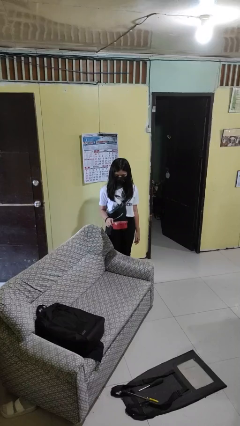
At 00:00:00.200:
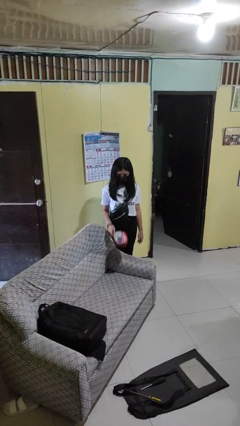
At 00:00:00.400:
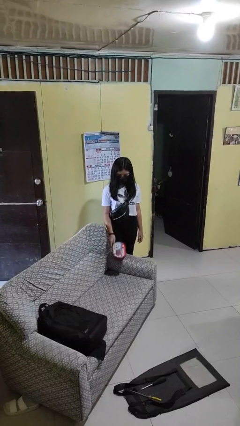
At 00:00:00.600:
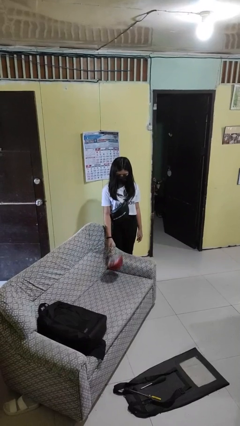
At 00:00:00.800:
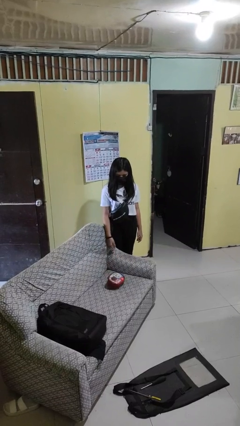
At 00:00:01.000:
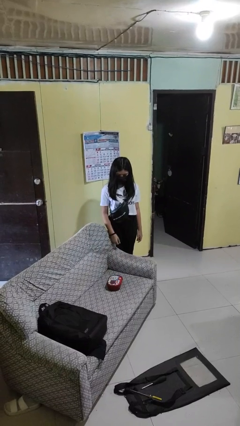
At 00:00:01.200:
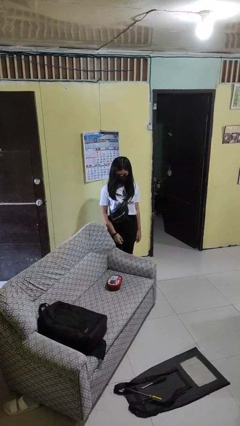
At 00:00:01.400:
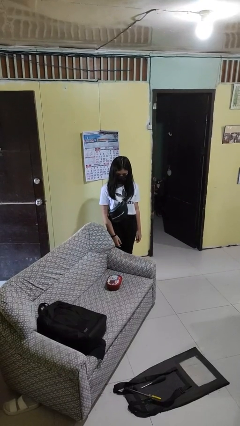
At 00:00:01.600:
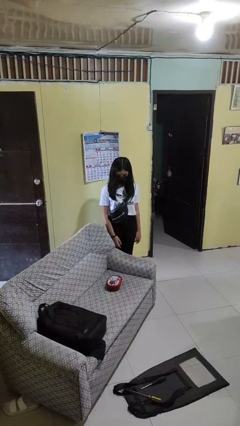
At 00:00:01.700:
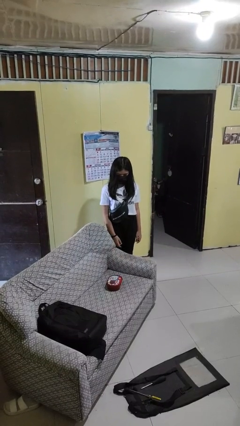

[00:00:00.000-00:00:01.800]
person puts down object on couch

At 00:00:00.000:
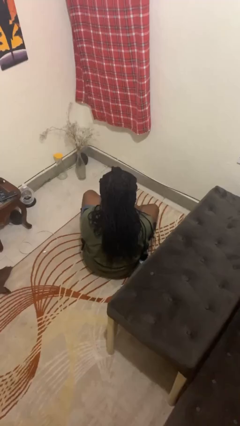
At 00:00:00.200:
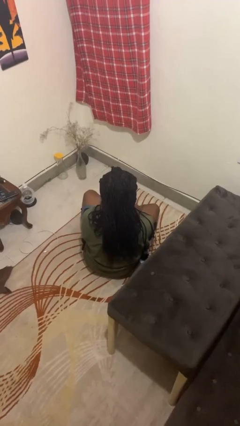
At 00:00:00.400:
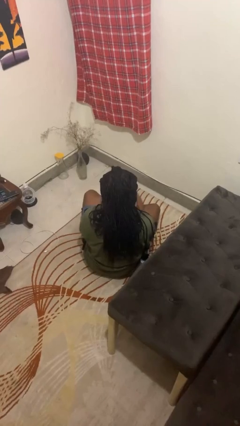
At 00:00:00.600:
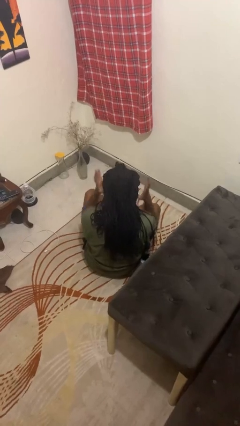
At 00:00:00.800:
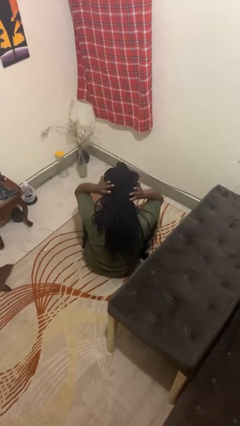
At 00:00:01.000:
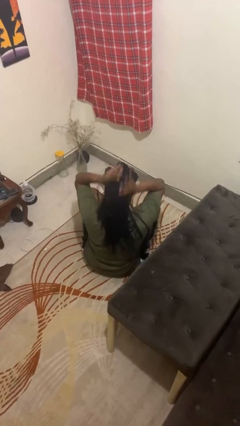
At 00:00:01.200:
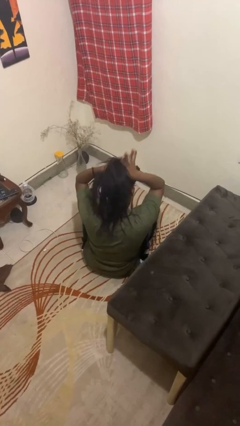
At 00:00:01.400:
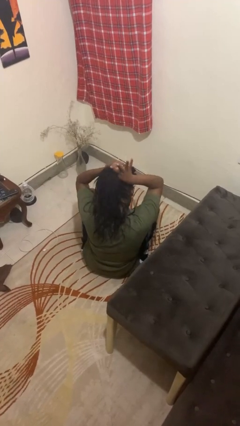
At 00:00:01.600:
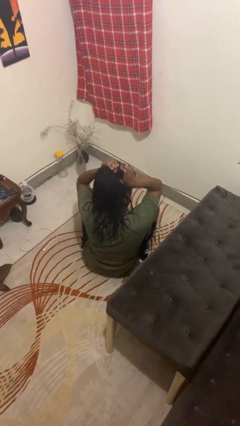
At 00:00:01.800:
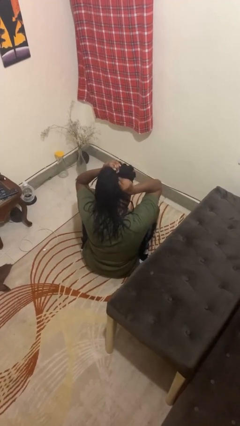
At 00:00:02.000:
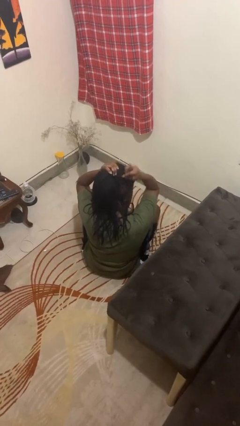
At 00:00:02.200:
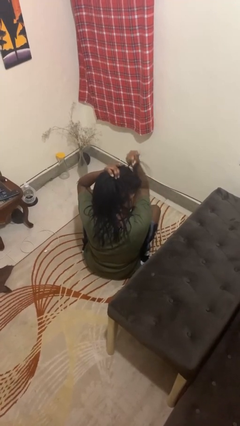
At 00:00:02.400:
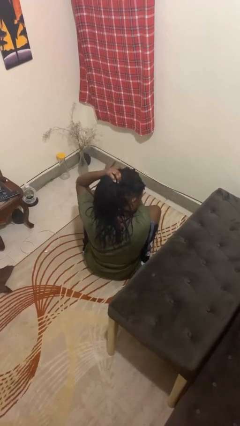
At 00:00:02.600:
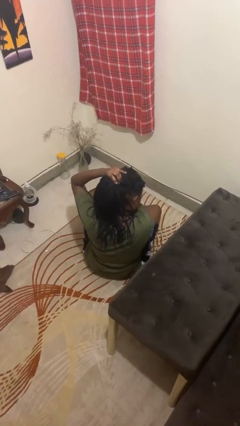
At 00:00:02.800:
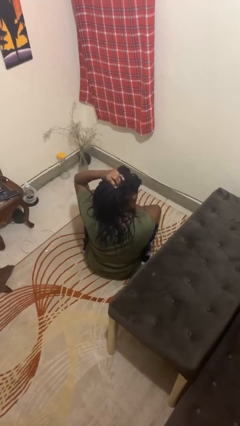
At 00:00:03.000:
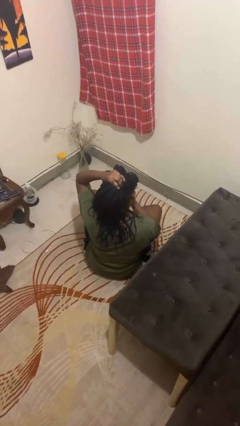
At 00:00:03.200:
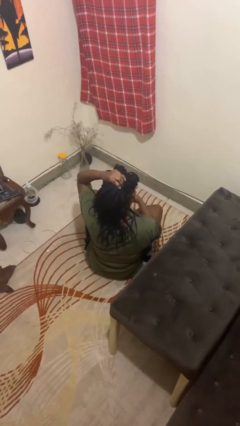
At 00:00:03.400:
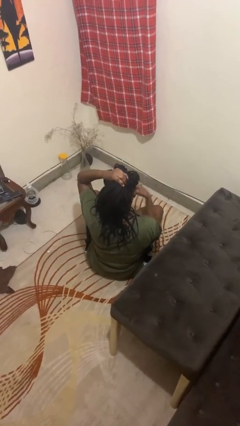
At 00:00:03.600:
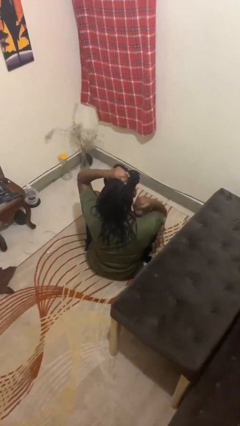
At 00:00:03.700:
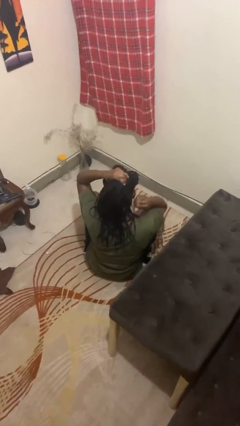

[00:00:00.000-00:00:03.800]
person puts hair in ponytail

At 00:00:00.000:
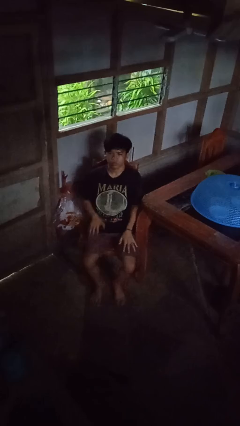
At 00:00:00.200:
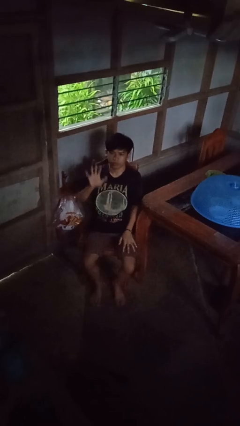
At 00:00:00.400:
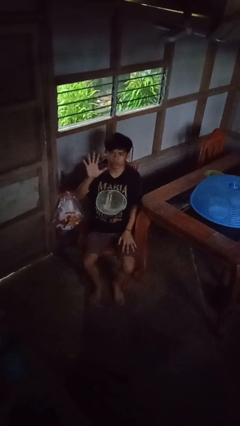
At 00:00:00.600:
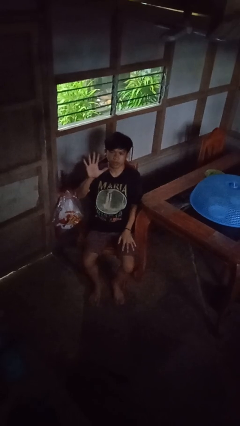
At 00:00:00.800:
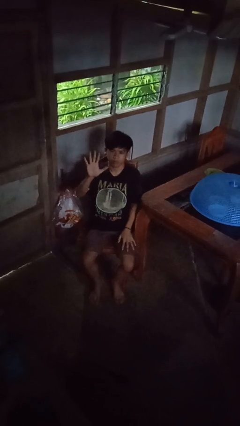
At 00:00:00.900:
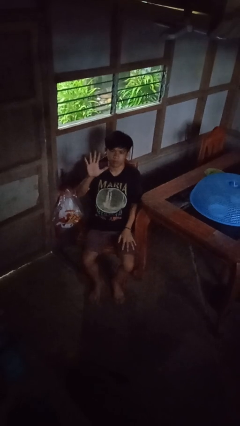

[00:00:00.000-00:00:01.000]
person gestures number five

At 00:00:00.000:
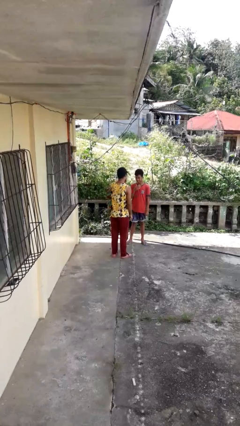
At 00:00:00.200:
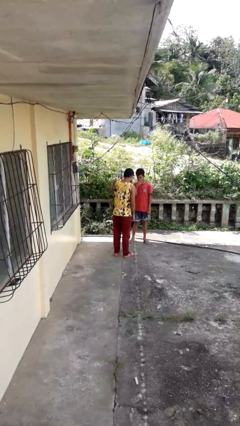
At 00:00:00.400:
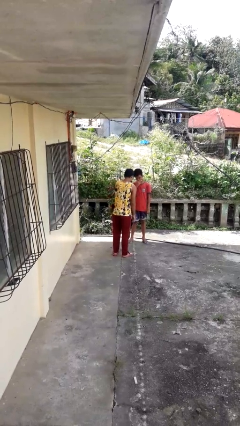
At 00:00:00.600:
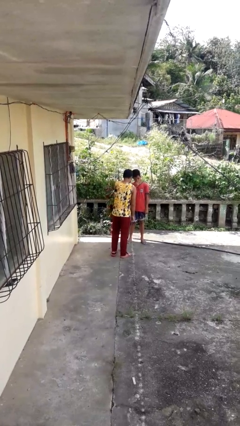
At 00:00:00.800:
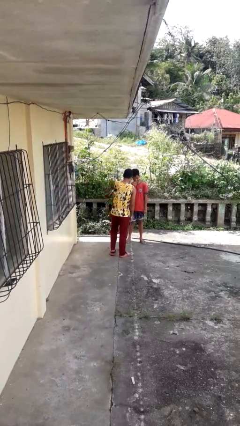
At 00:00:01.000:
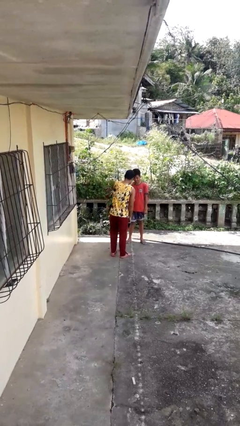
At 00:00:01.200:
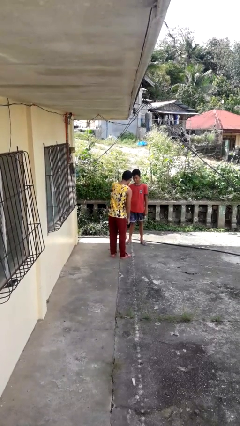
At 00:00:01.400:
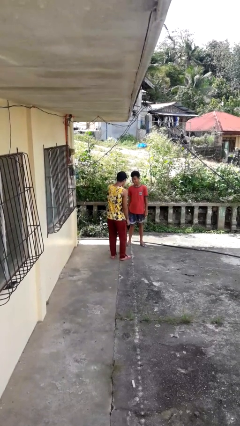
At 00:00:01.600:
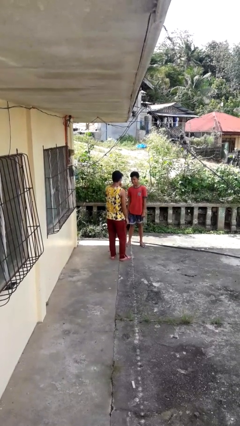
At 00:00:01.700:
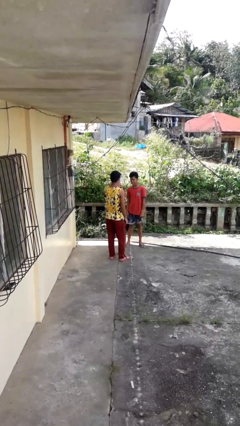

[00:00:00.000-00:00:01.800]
person laughs with person

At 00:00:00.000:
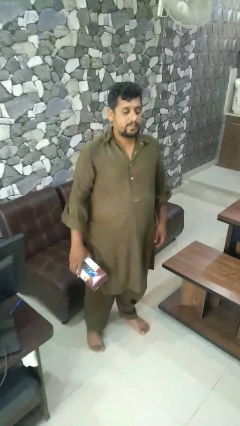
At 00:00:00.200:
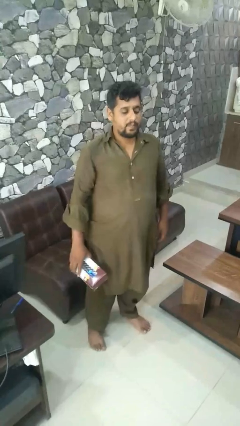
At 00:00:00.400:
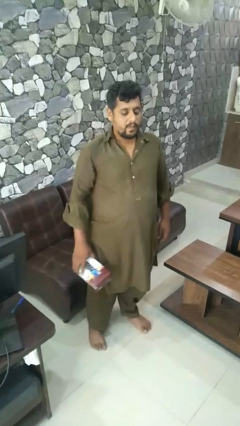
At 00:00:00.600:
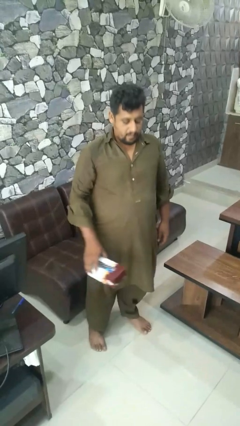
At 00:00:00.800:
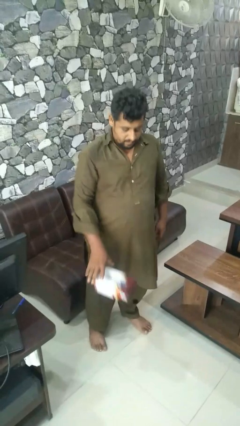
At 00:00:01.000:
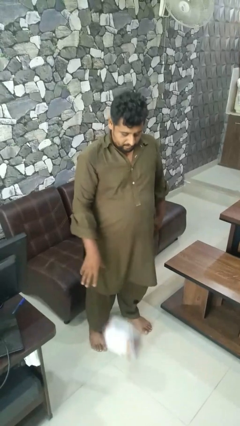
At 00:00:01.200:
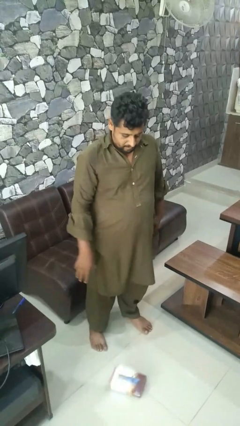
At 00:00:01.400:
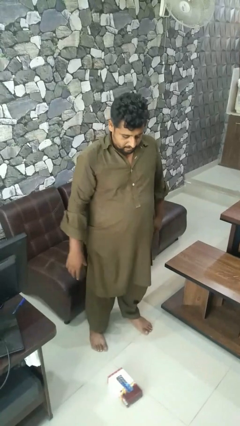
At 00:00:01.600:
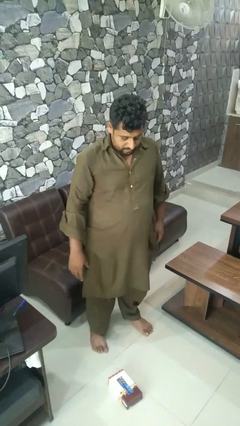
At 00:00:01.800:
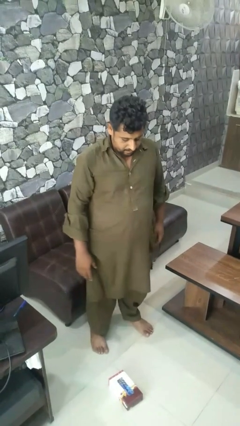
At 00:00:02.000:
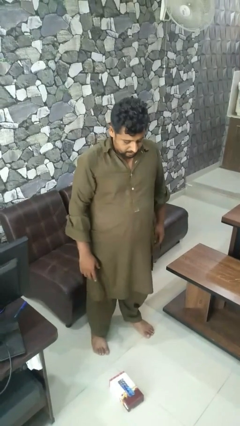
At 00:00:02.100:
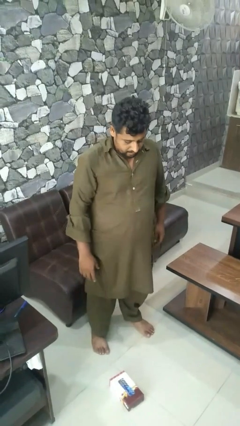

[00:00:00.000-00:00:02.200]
person throws object to ground

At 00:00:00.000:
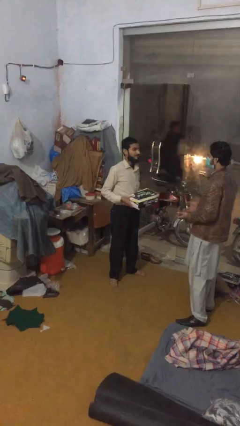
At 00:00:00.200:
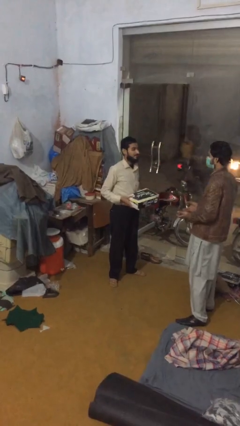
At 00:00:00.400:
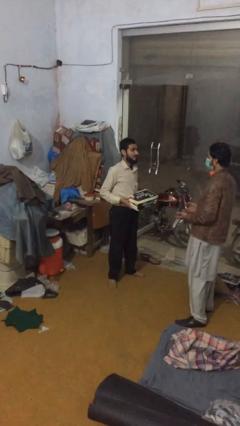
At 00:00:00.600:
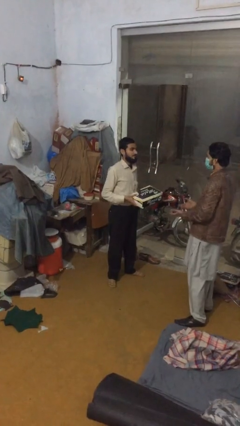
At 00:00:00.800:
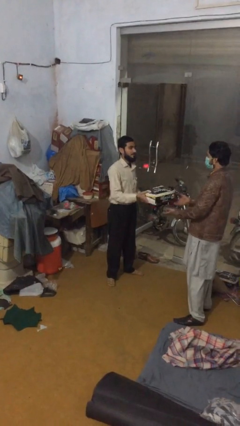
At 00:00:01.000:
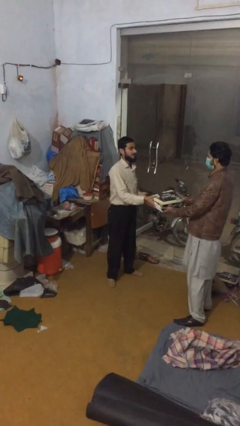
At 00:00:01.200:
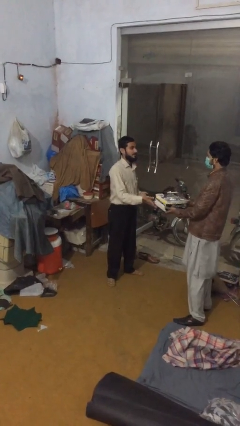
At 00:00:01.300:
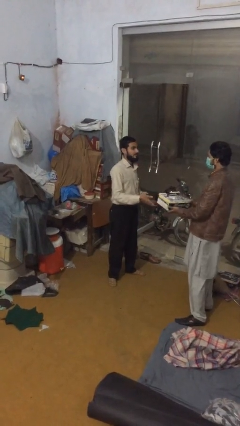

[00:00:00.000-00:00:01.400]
person transfers object to person

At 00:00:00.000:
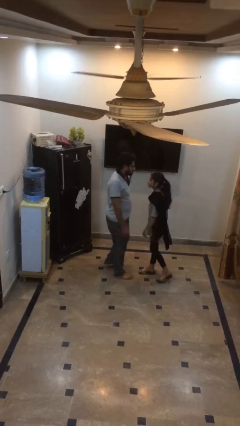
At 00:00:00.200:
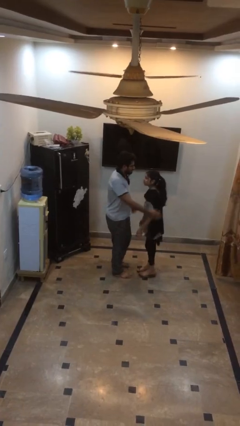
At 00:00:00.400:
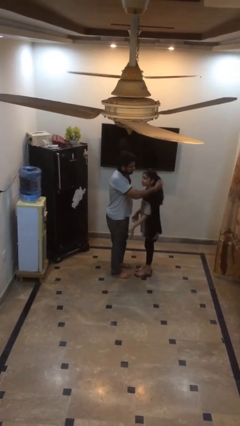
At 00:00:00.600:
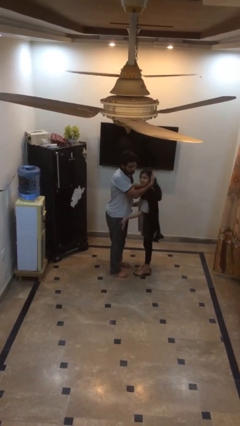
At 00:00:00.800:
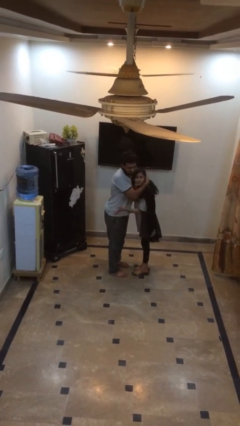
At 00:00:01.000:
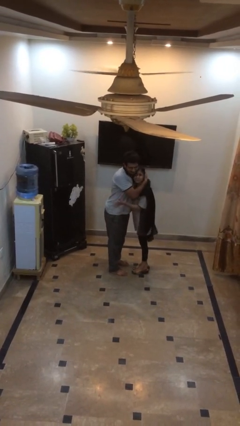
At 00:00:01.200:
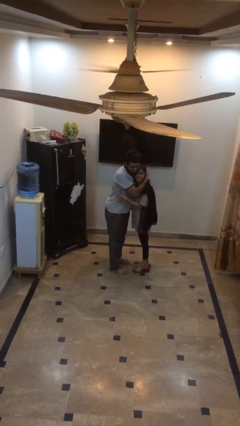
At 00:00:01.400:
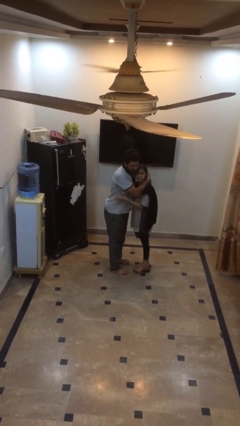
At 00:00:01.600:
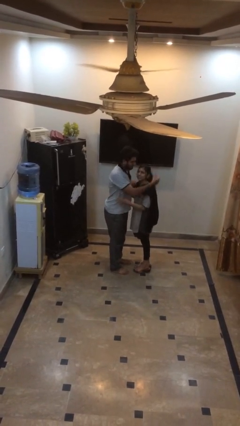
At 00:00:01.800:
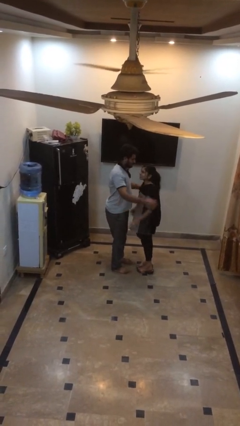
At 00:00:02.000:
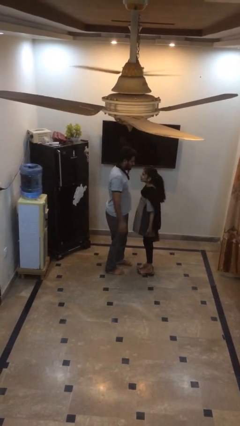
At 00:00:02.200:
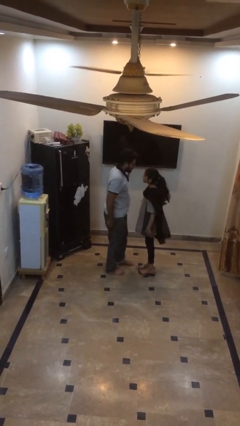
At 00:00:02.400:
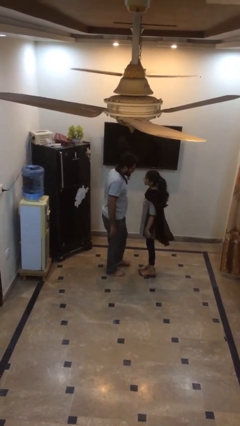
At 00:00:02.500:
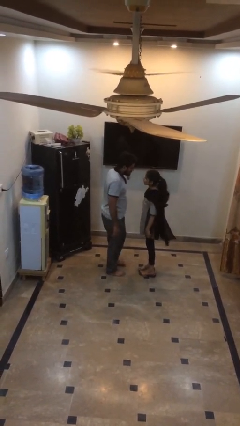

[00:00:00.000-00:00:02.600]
person embraces person

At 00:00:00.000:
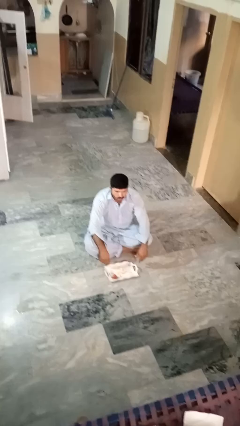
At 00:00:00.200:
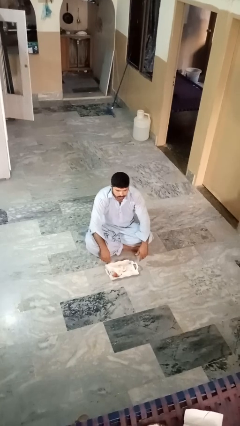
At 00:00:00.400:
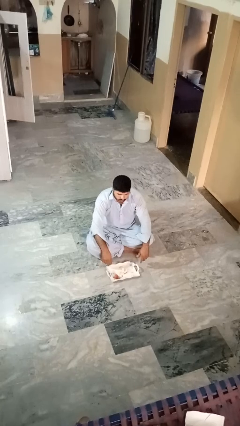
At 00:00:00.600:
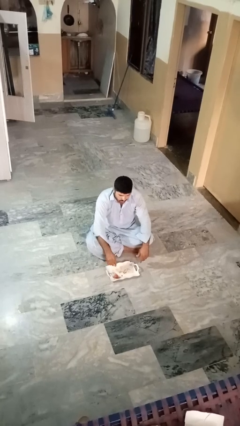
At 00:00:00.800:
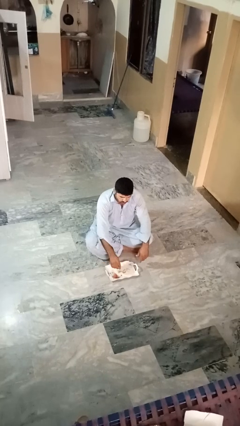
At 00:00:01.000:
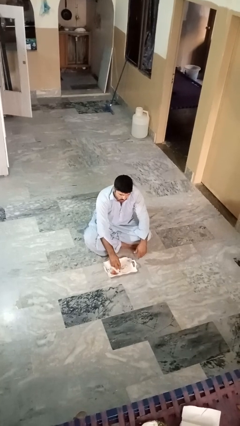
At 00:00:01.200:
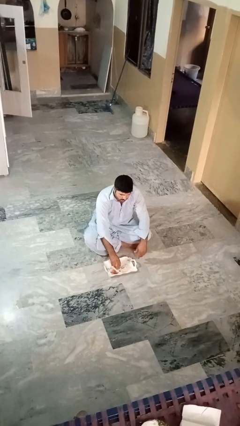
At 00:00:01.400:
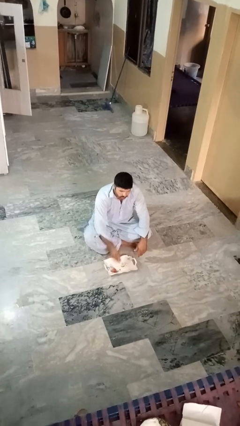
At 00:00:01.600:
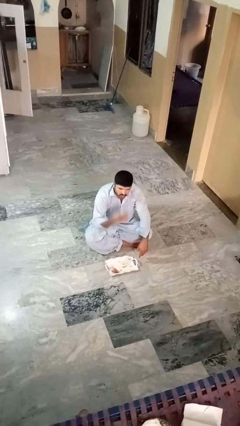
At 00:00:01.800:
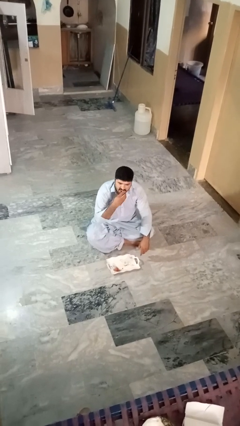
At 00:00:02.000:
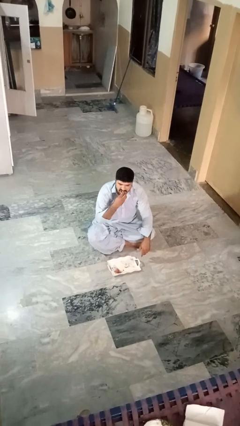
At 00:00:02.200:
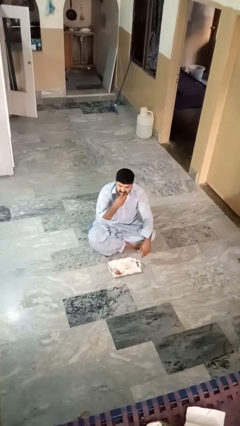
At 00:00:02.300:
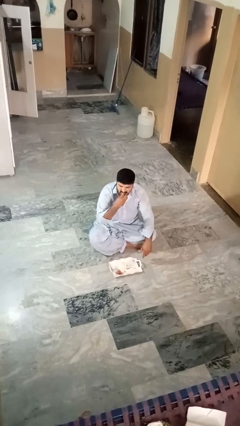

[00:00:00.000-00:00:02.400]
person eats apple
